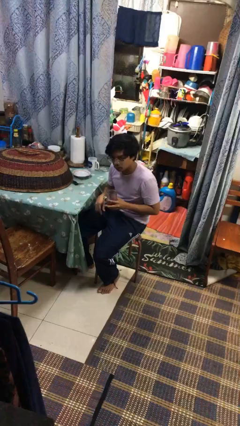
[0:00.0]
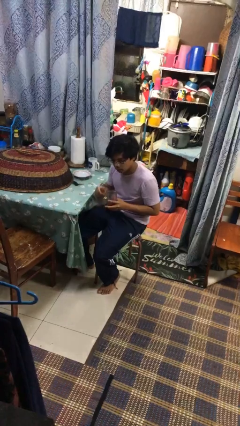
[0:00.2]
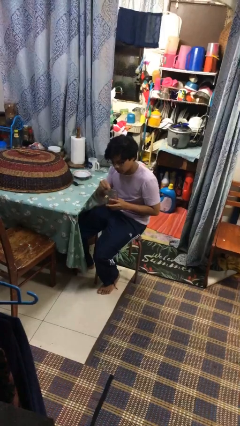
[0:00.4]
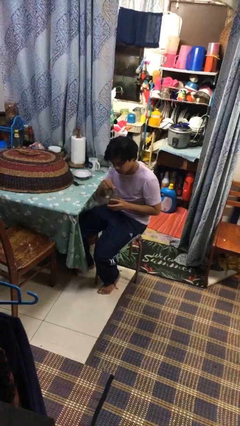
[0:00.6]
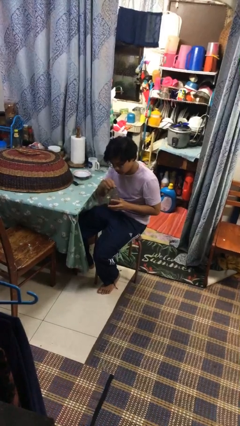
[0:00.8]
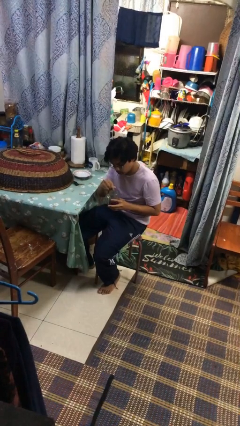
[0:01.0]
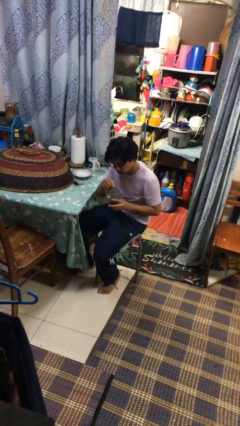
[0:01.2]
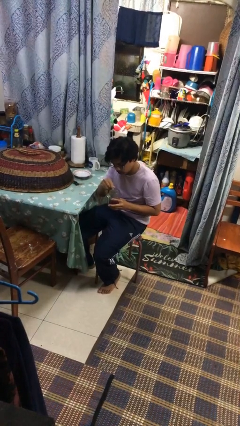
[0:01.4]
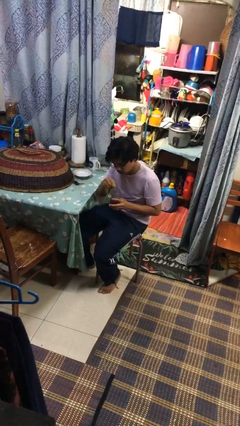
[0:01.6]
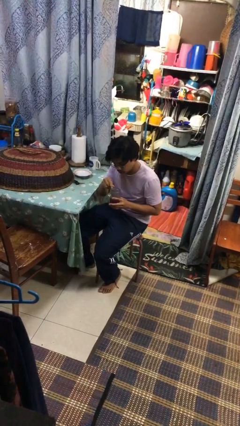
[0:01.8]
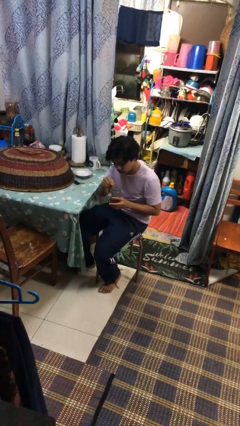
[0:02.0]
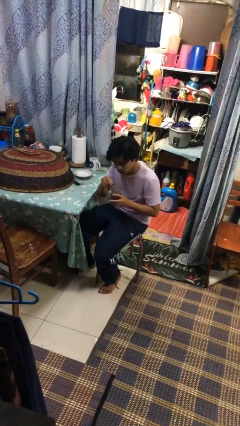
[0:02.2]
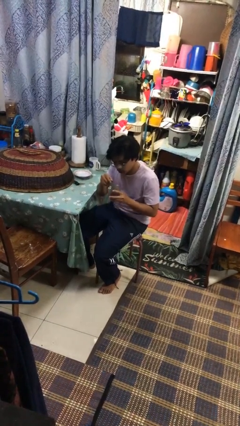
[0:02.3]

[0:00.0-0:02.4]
person stirs mug

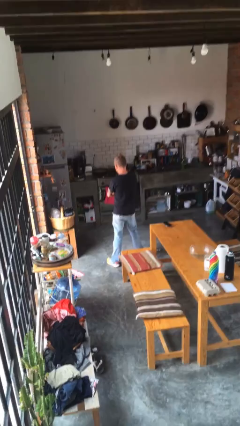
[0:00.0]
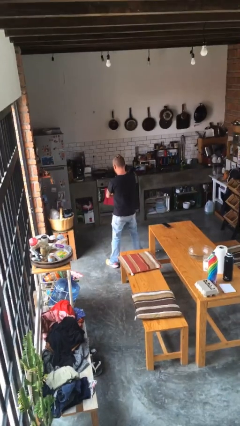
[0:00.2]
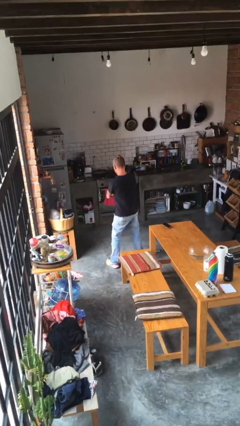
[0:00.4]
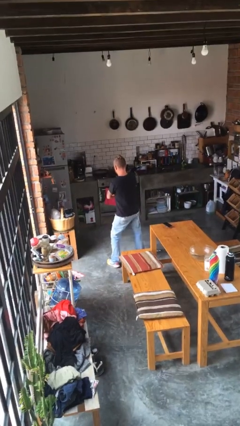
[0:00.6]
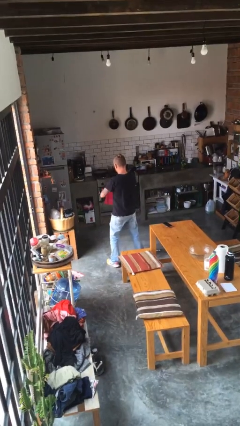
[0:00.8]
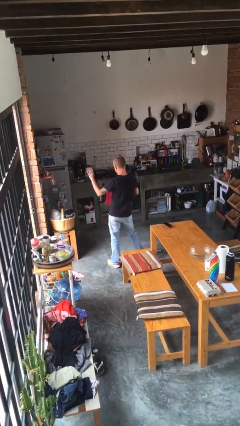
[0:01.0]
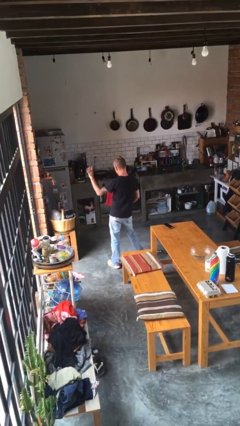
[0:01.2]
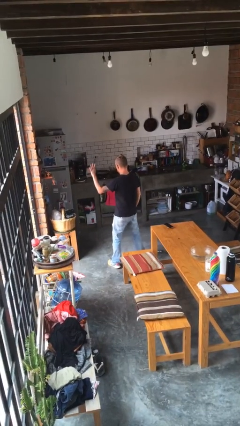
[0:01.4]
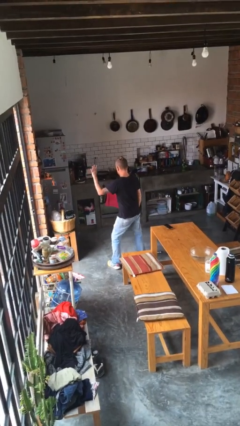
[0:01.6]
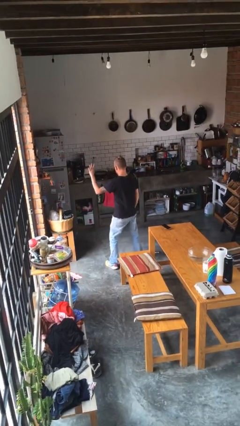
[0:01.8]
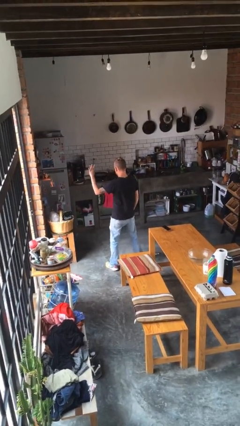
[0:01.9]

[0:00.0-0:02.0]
person gestures number four

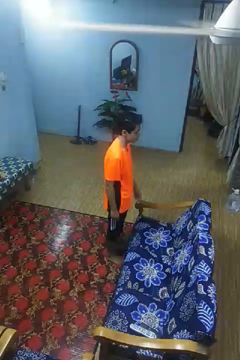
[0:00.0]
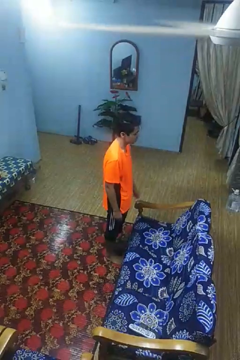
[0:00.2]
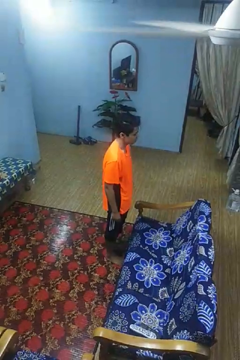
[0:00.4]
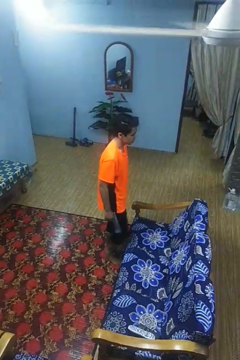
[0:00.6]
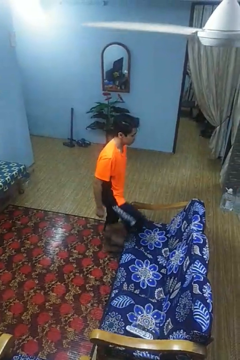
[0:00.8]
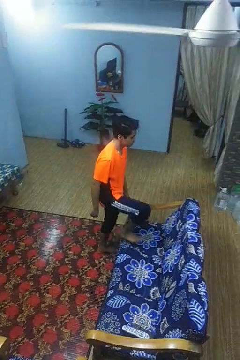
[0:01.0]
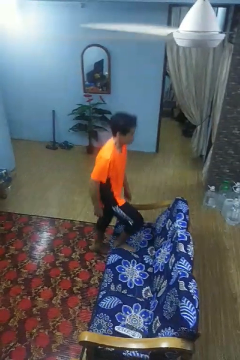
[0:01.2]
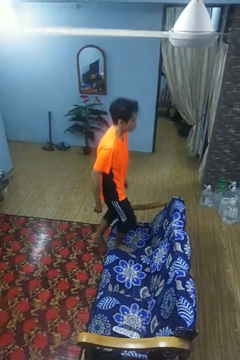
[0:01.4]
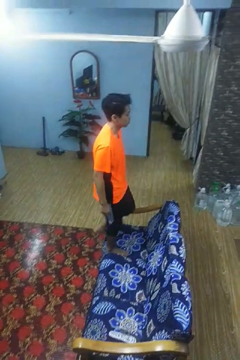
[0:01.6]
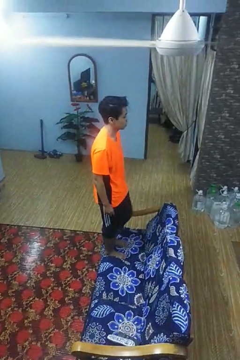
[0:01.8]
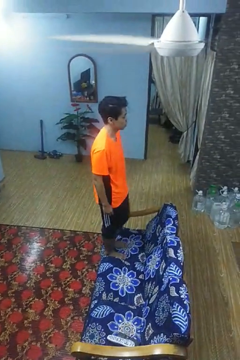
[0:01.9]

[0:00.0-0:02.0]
person climbs on couch

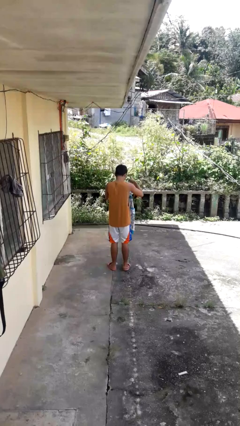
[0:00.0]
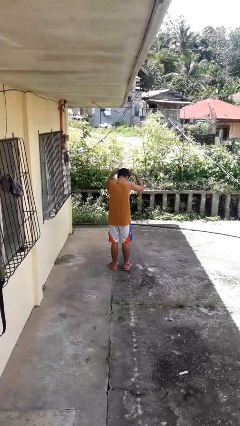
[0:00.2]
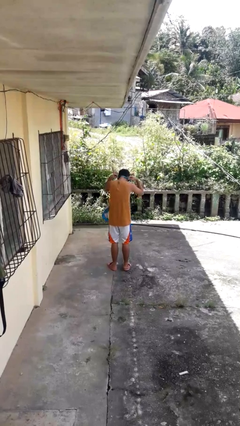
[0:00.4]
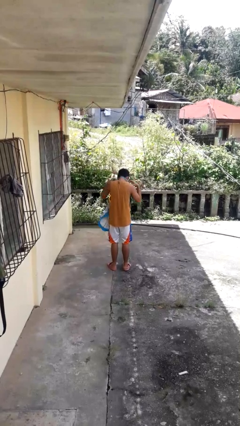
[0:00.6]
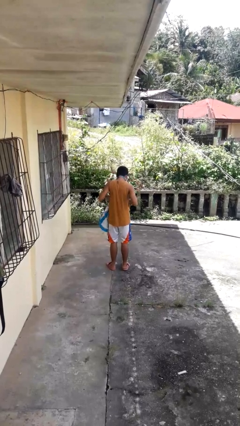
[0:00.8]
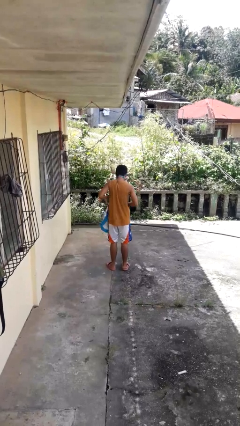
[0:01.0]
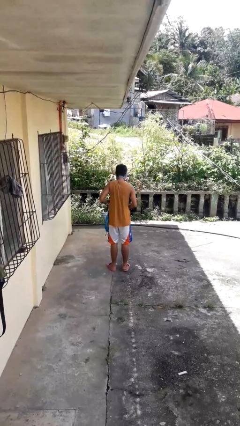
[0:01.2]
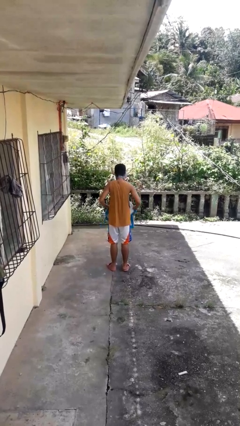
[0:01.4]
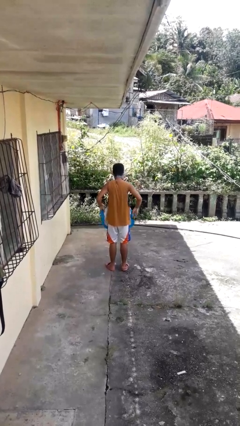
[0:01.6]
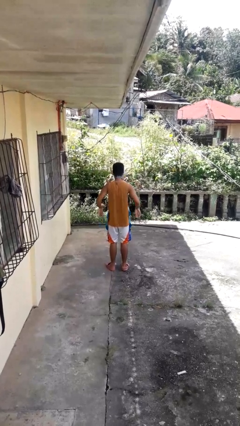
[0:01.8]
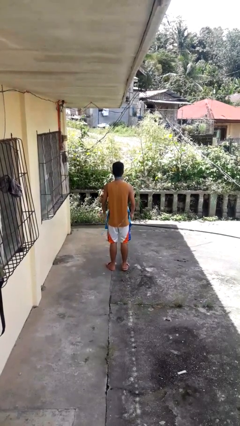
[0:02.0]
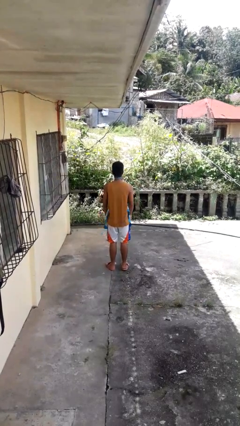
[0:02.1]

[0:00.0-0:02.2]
person puts on apron

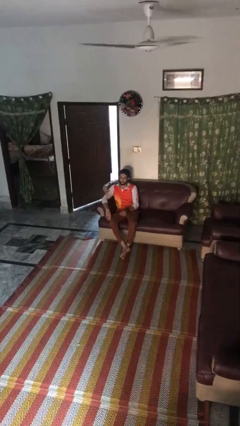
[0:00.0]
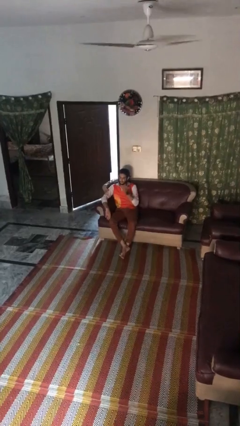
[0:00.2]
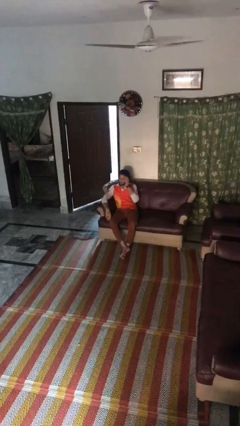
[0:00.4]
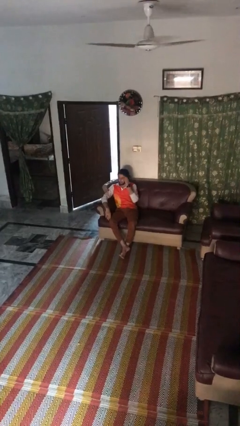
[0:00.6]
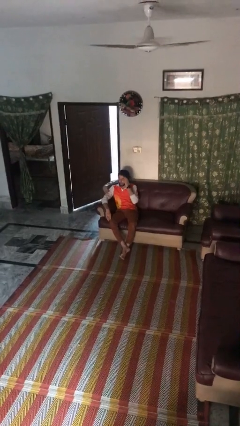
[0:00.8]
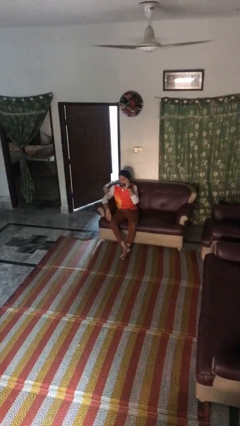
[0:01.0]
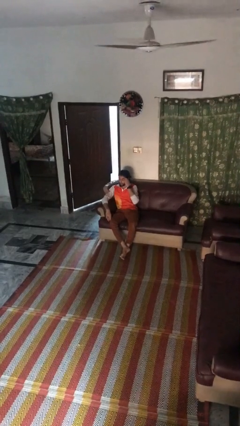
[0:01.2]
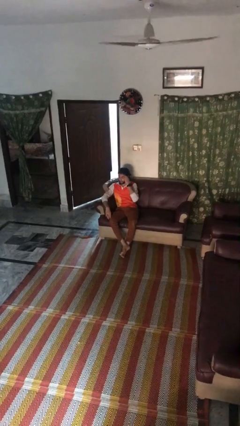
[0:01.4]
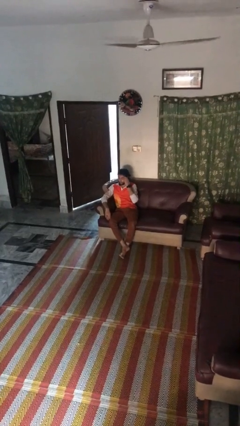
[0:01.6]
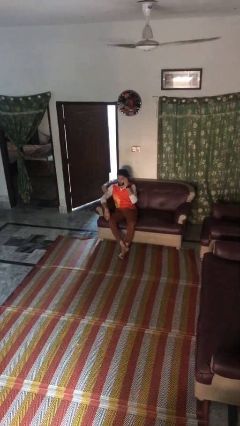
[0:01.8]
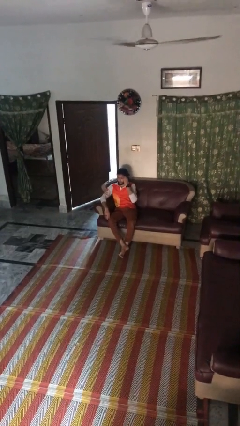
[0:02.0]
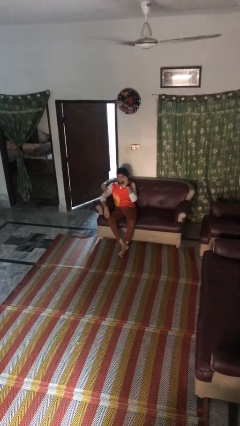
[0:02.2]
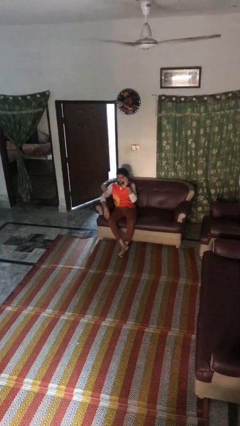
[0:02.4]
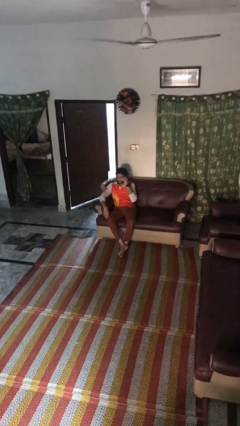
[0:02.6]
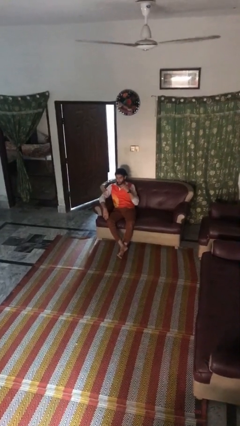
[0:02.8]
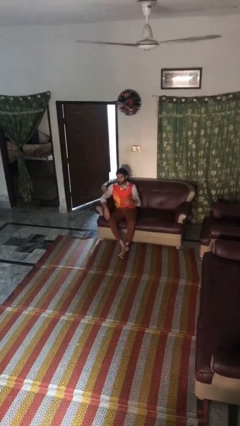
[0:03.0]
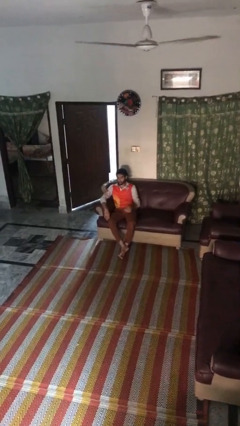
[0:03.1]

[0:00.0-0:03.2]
person scratches face

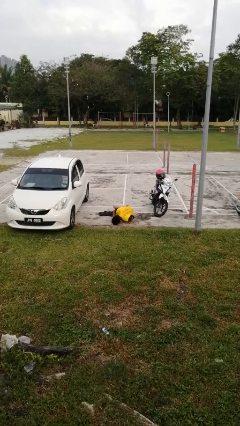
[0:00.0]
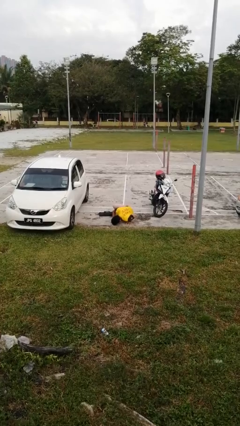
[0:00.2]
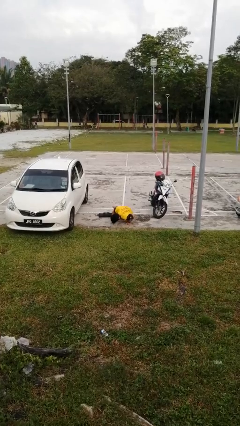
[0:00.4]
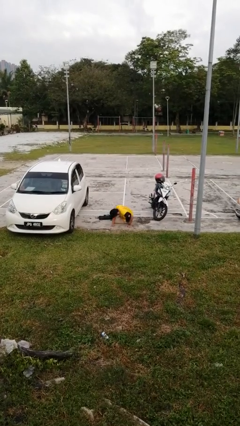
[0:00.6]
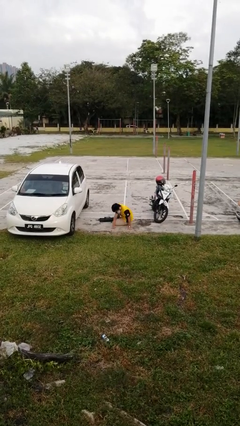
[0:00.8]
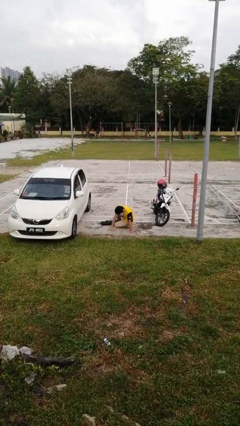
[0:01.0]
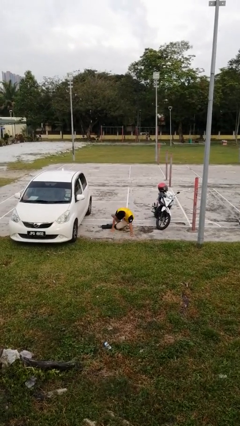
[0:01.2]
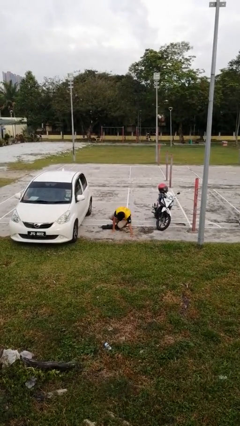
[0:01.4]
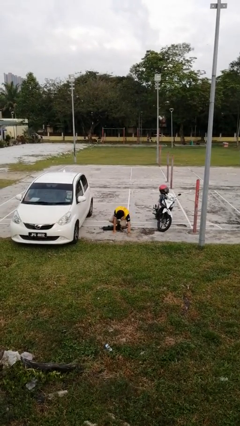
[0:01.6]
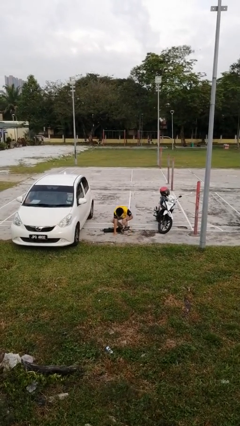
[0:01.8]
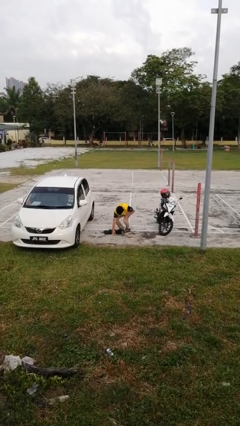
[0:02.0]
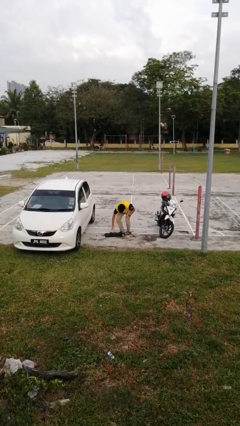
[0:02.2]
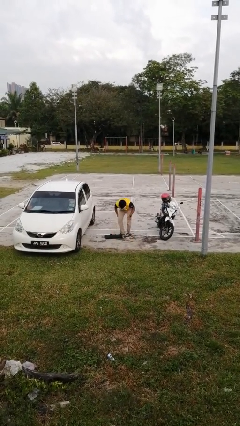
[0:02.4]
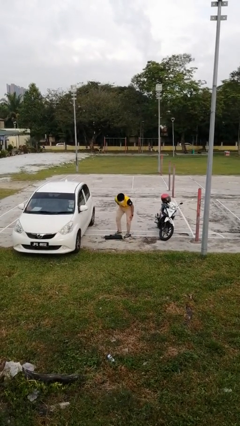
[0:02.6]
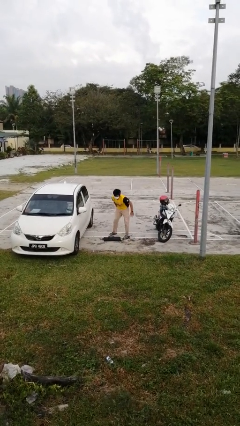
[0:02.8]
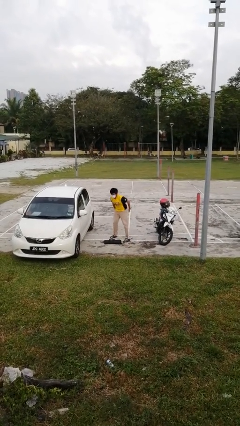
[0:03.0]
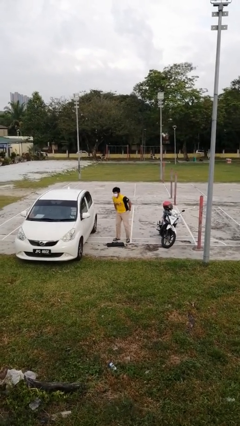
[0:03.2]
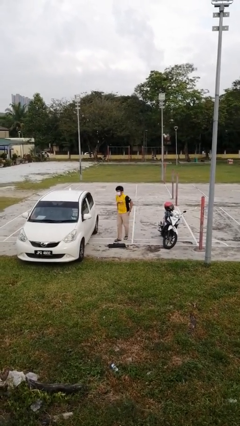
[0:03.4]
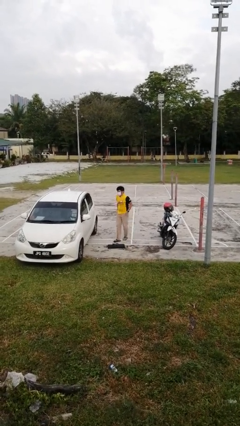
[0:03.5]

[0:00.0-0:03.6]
person stands up from floor

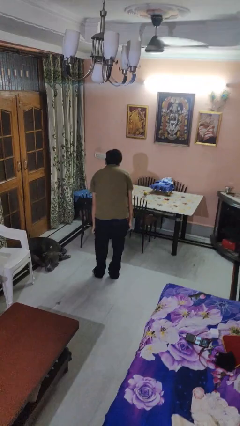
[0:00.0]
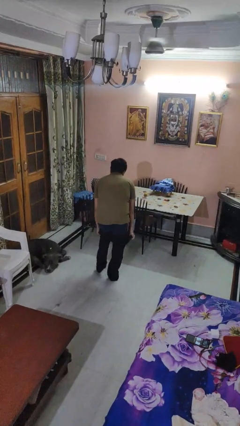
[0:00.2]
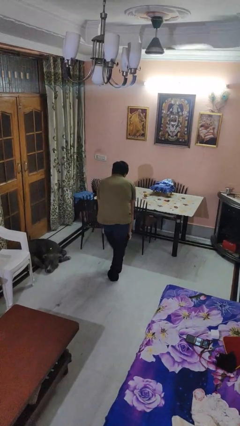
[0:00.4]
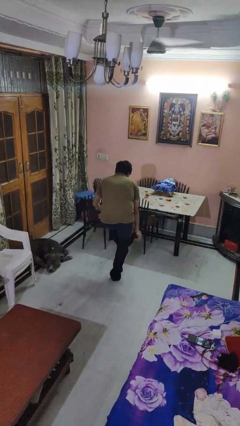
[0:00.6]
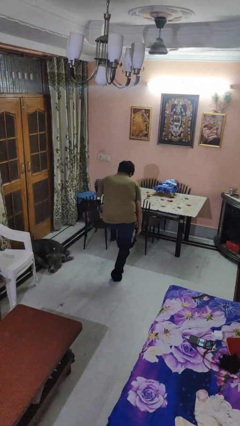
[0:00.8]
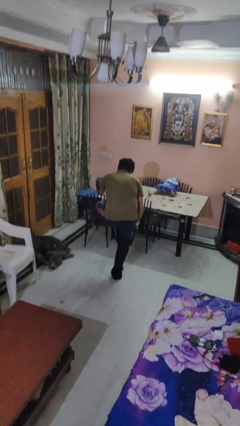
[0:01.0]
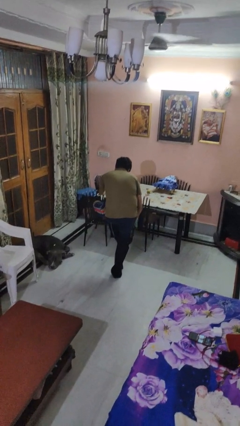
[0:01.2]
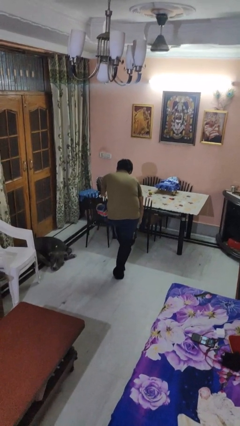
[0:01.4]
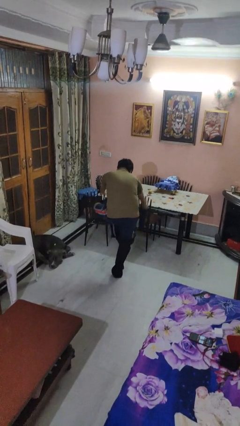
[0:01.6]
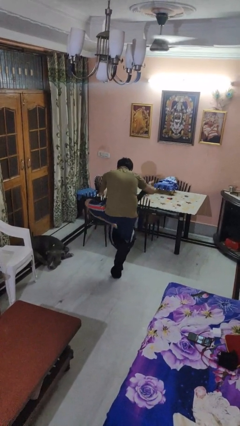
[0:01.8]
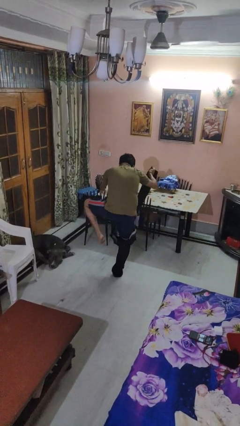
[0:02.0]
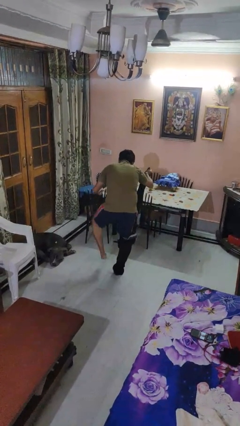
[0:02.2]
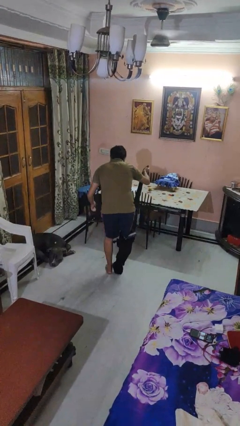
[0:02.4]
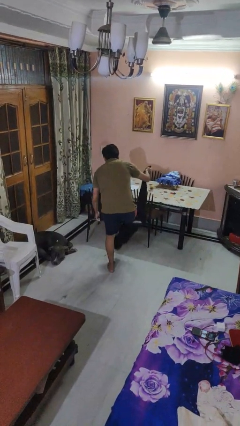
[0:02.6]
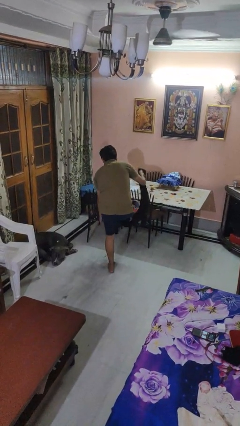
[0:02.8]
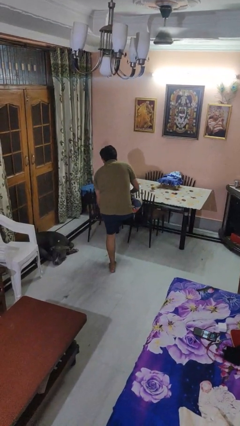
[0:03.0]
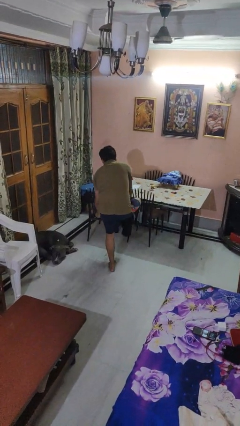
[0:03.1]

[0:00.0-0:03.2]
person takes off pants
